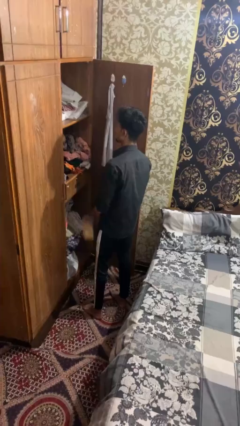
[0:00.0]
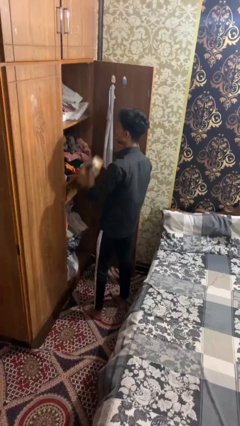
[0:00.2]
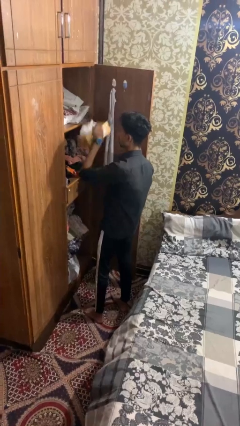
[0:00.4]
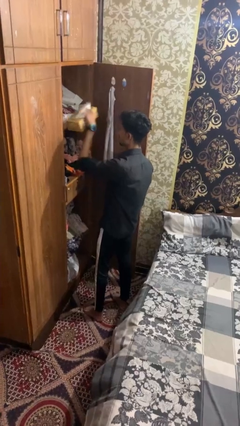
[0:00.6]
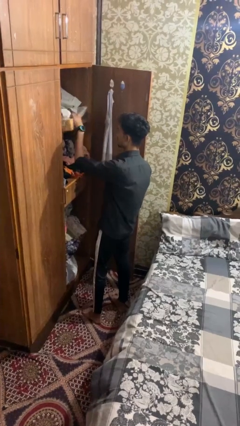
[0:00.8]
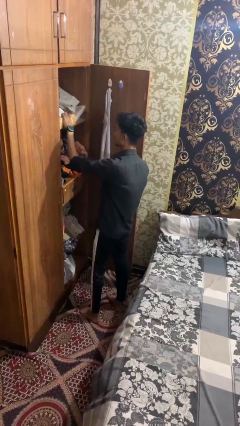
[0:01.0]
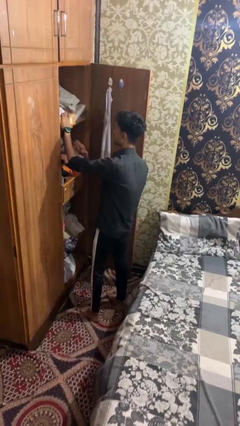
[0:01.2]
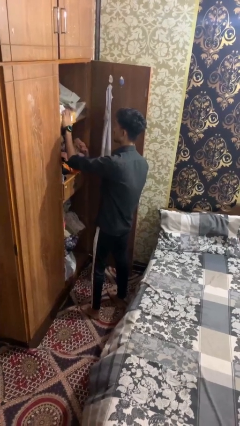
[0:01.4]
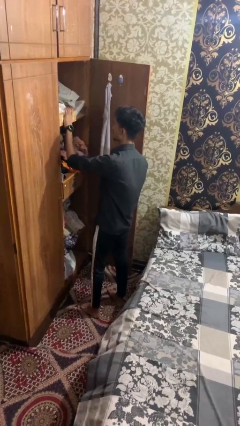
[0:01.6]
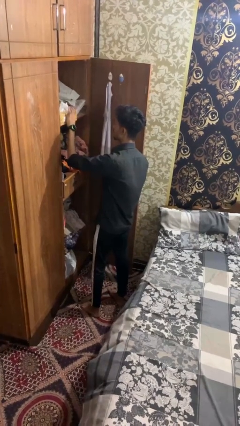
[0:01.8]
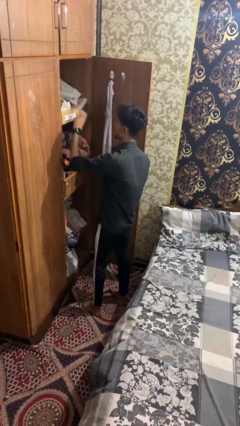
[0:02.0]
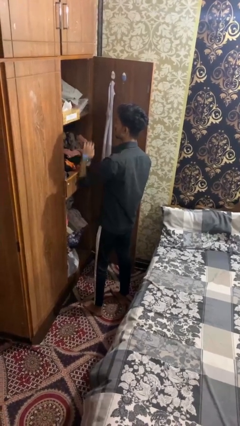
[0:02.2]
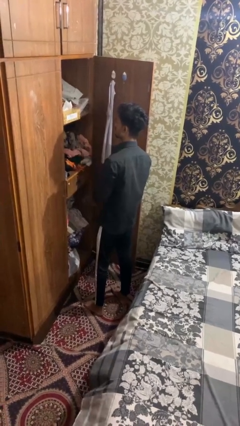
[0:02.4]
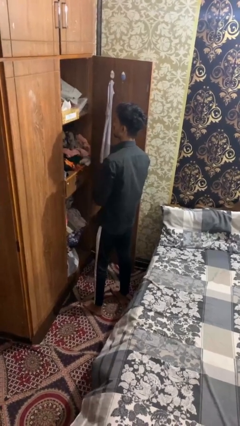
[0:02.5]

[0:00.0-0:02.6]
person puts down object on countertop

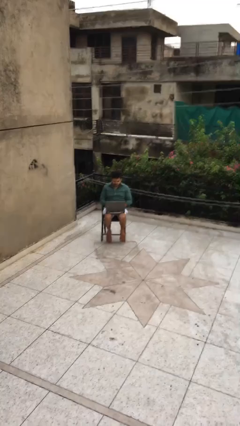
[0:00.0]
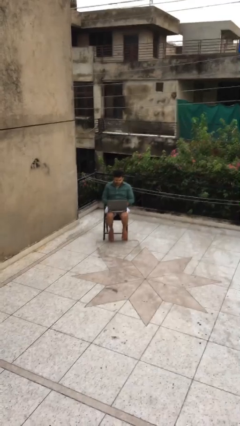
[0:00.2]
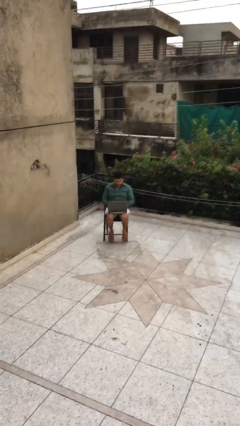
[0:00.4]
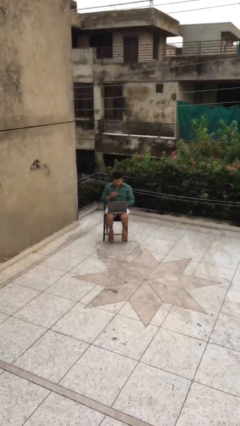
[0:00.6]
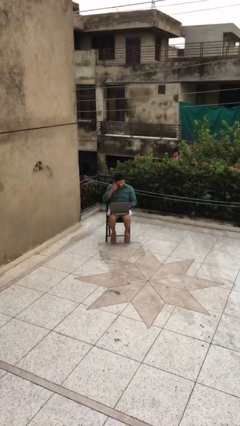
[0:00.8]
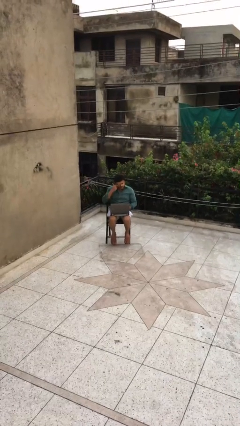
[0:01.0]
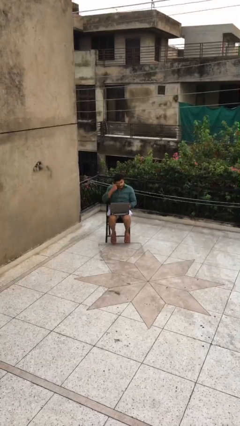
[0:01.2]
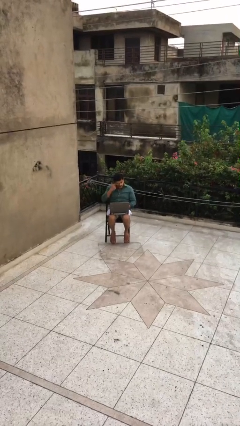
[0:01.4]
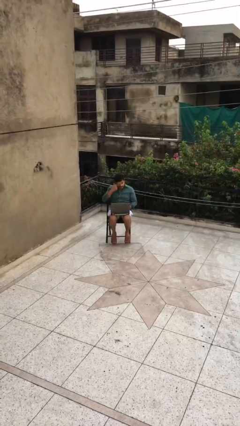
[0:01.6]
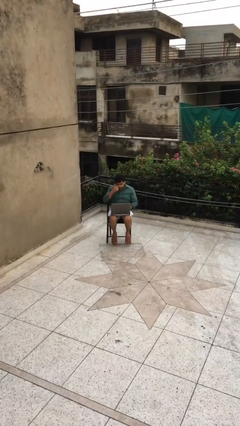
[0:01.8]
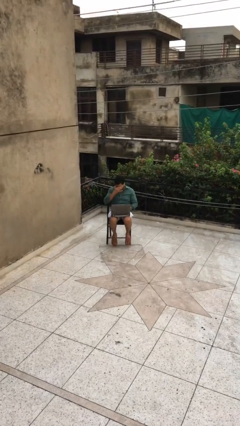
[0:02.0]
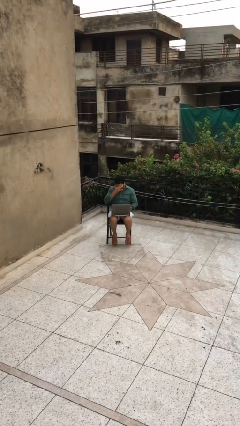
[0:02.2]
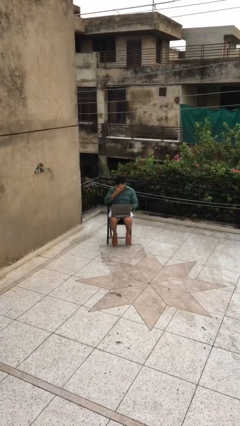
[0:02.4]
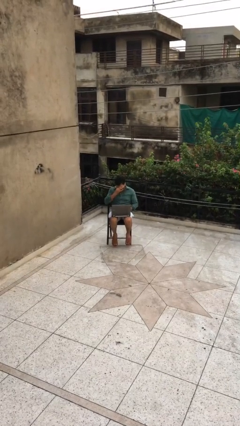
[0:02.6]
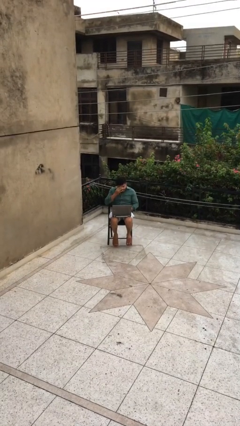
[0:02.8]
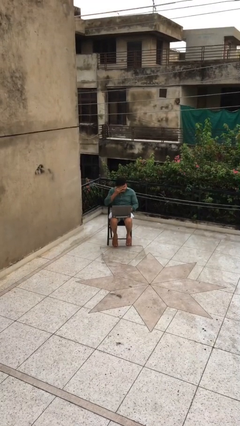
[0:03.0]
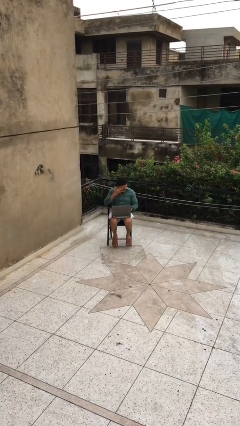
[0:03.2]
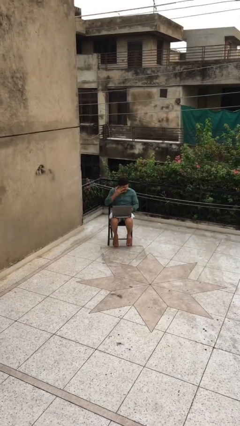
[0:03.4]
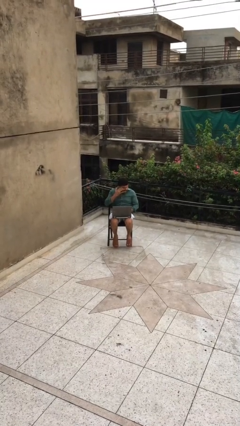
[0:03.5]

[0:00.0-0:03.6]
person interacts with laptop

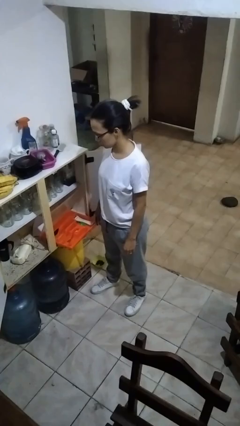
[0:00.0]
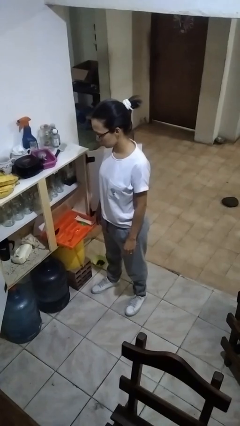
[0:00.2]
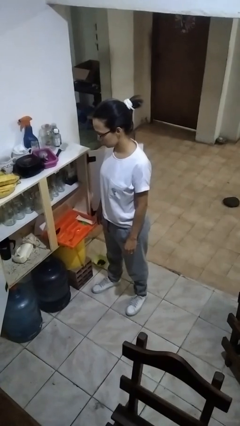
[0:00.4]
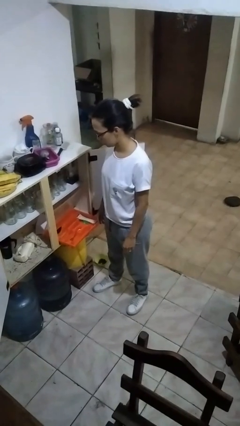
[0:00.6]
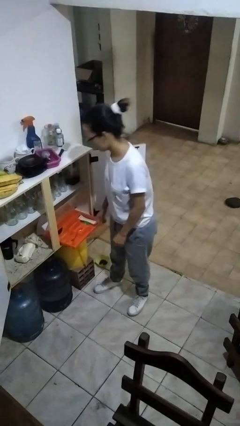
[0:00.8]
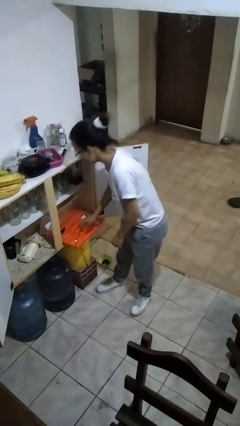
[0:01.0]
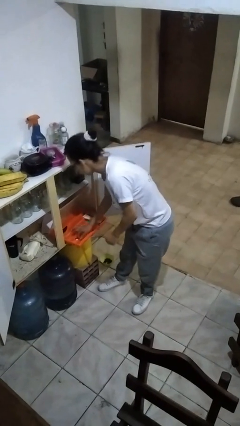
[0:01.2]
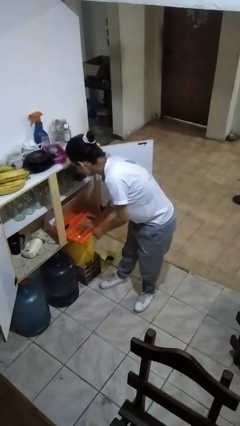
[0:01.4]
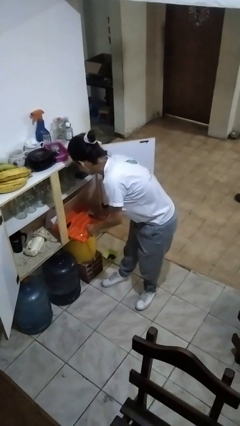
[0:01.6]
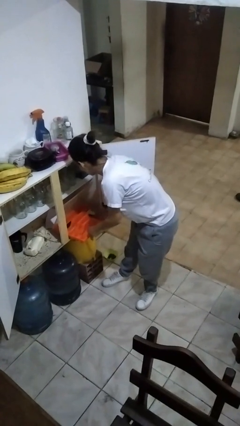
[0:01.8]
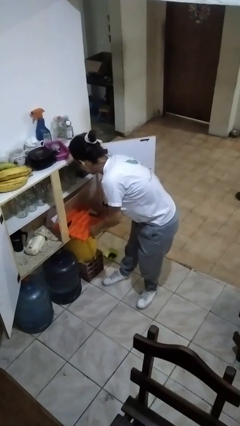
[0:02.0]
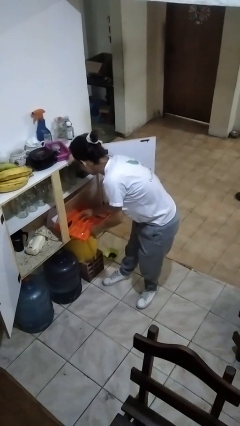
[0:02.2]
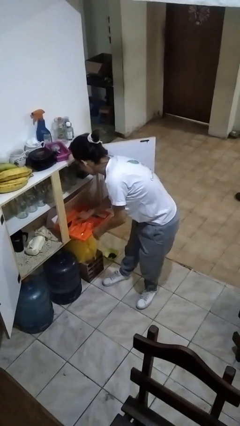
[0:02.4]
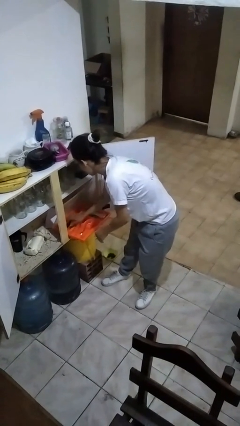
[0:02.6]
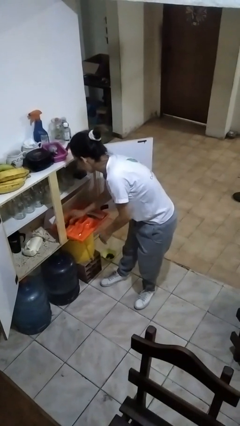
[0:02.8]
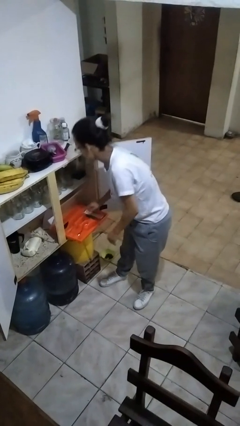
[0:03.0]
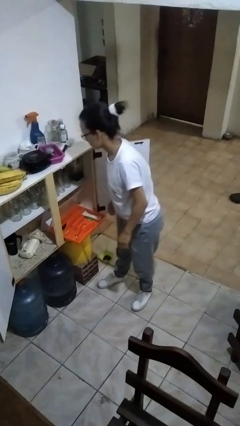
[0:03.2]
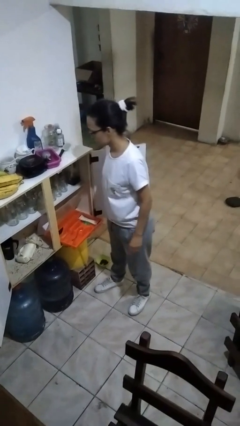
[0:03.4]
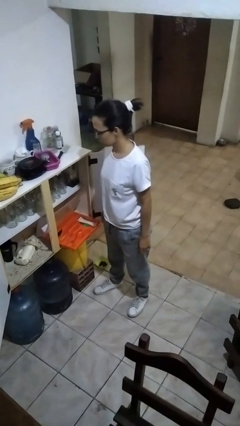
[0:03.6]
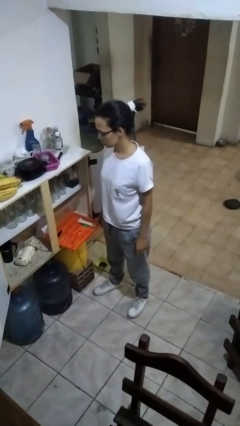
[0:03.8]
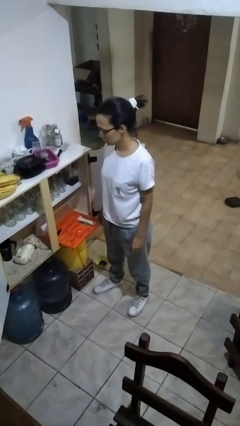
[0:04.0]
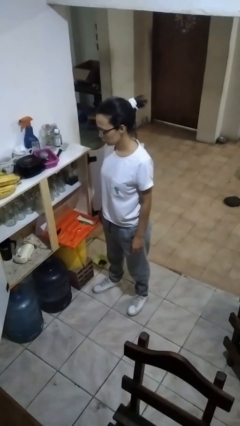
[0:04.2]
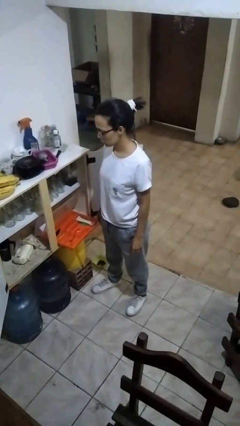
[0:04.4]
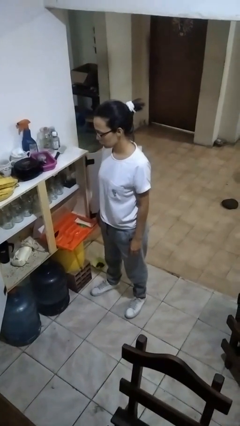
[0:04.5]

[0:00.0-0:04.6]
person searches in kitchen drawer

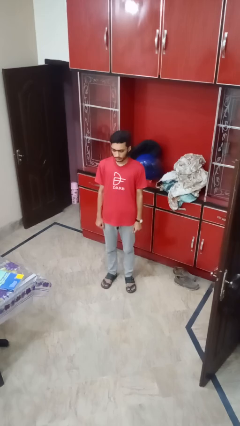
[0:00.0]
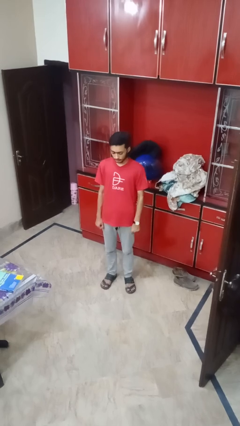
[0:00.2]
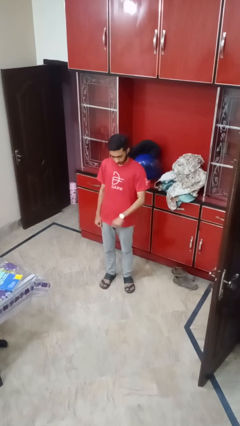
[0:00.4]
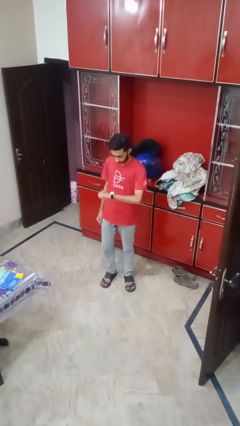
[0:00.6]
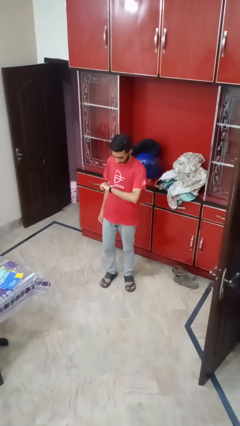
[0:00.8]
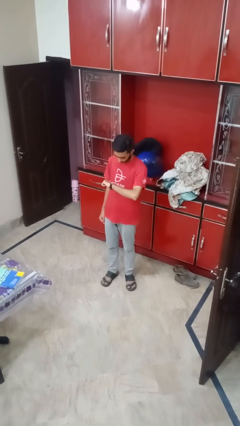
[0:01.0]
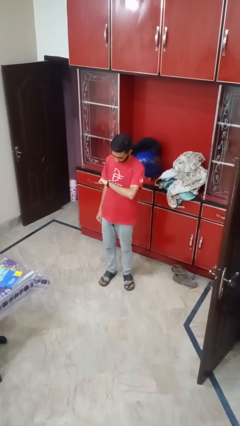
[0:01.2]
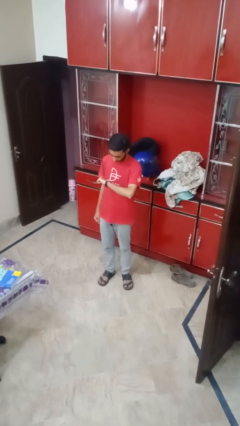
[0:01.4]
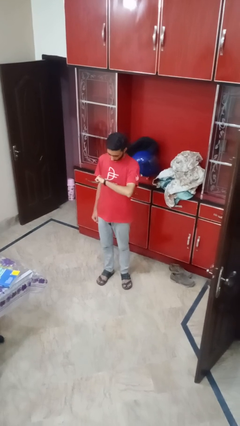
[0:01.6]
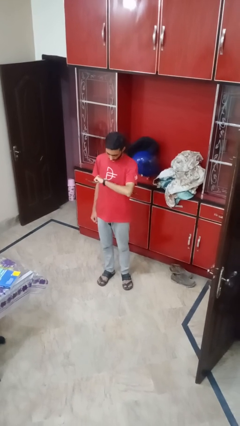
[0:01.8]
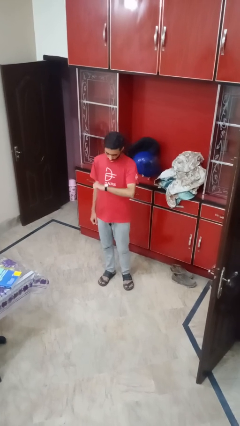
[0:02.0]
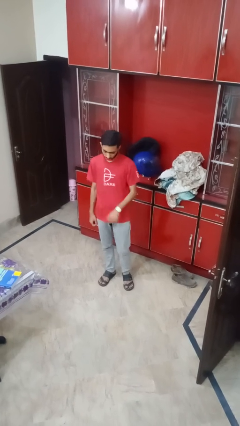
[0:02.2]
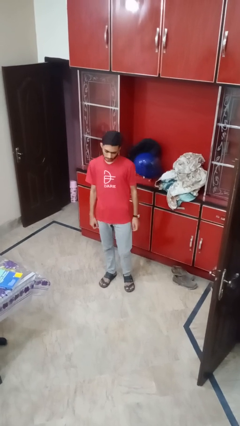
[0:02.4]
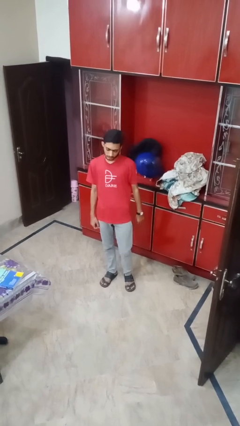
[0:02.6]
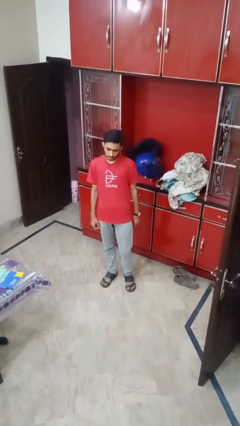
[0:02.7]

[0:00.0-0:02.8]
person looks at wristwatch

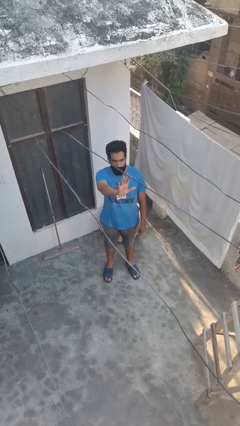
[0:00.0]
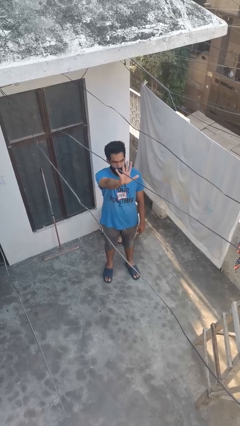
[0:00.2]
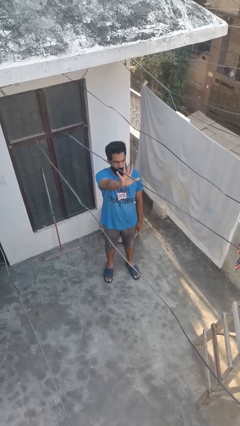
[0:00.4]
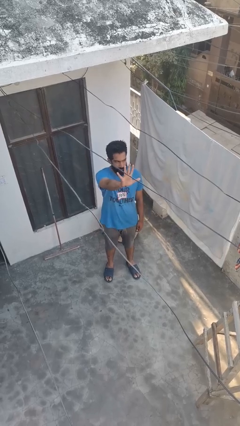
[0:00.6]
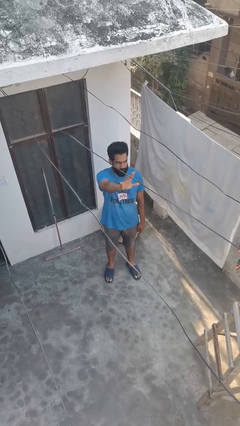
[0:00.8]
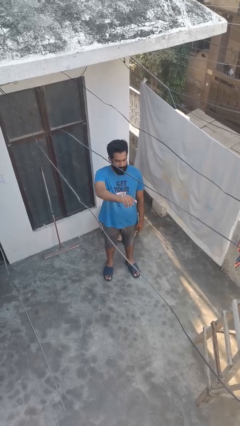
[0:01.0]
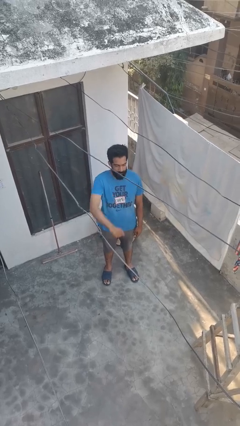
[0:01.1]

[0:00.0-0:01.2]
person gestures number five

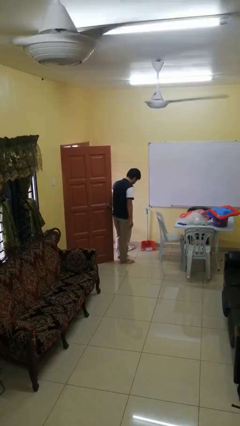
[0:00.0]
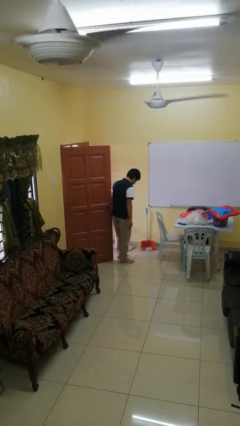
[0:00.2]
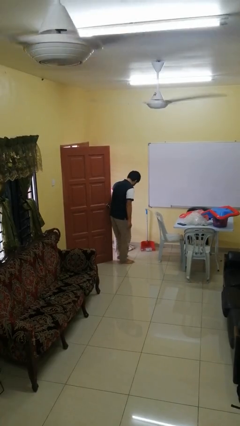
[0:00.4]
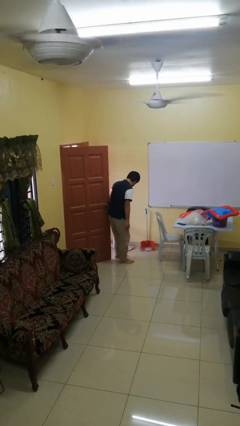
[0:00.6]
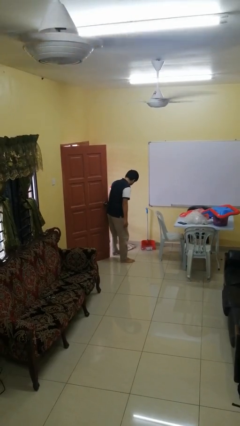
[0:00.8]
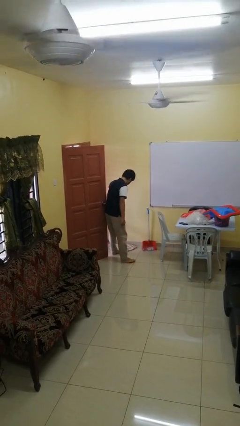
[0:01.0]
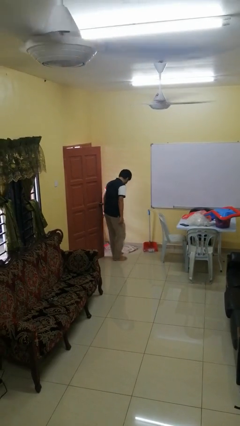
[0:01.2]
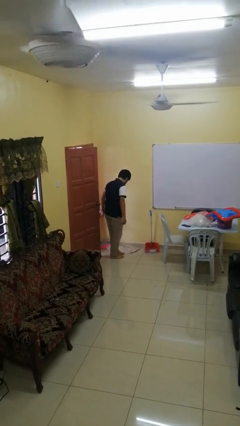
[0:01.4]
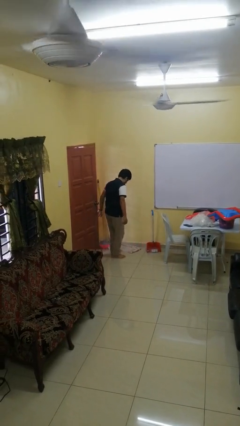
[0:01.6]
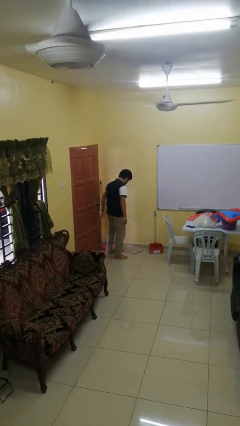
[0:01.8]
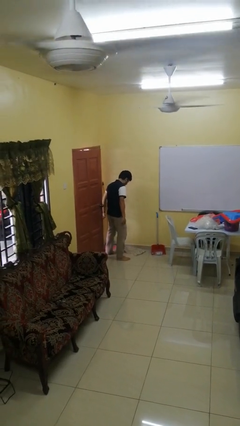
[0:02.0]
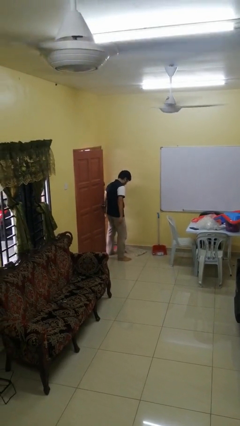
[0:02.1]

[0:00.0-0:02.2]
person closes door with hip

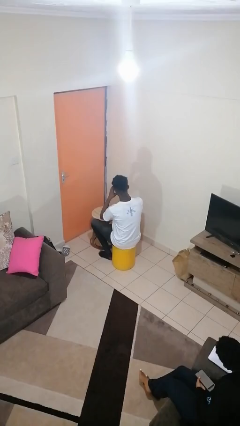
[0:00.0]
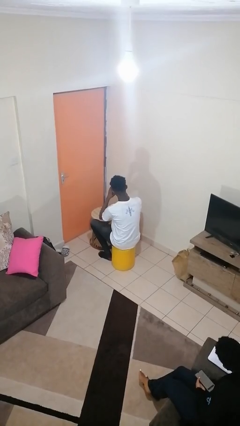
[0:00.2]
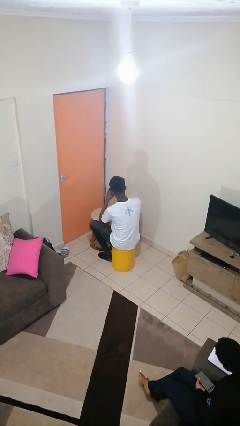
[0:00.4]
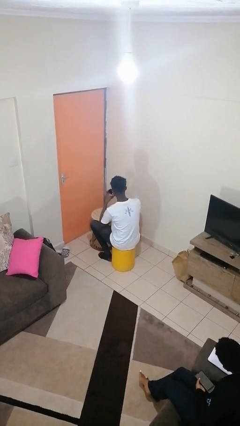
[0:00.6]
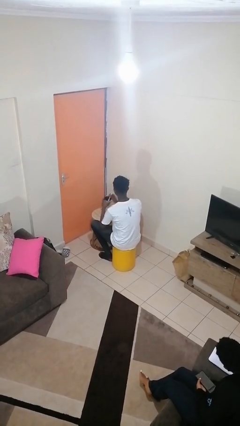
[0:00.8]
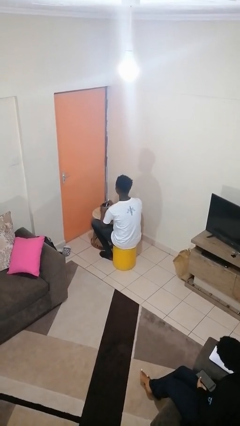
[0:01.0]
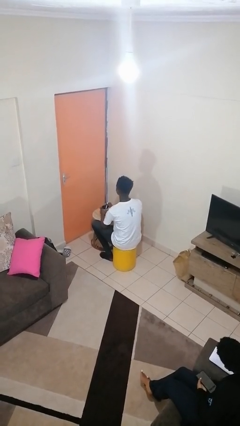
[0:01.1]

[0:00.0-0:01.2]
person drinks from mug
